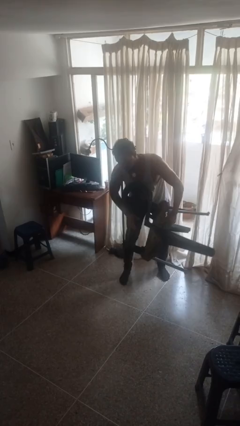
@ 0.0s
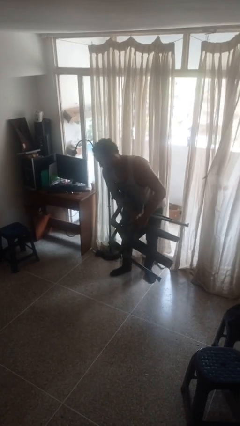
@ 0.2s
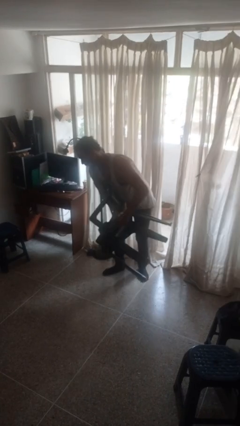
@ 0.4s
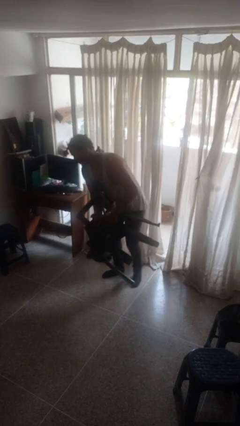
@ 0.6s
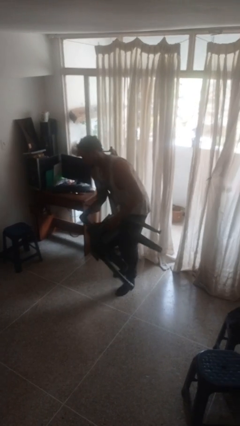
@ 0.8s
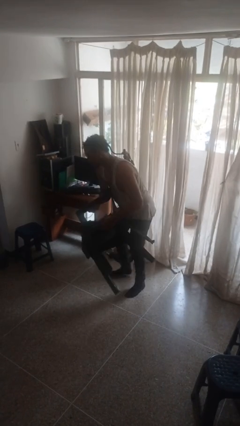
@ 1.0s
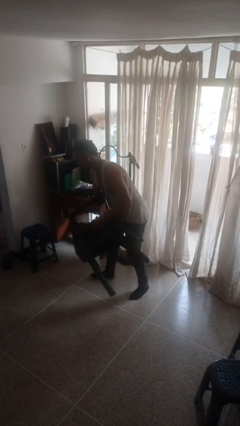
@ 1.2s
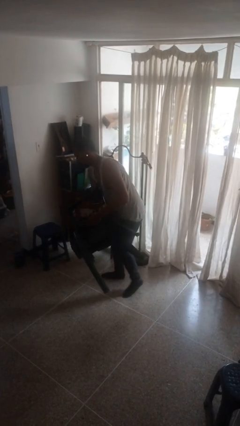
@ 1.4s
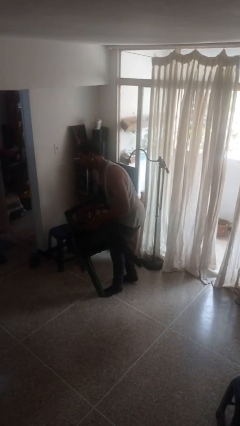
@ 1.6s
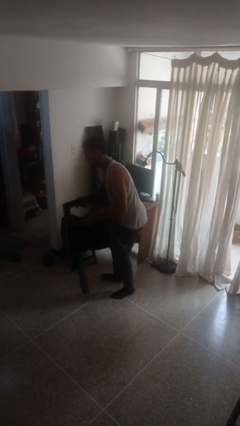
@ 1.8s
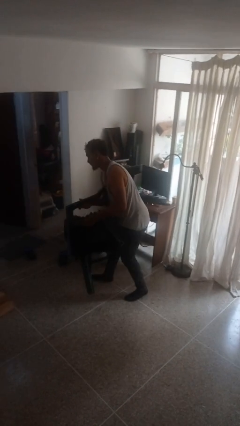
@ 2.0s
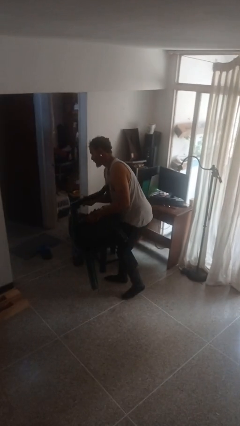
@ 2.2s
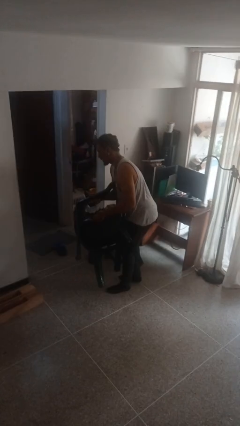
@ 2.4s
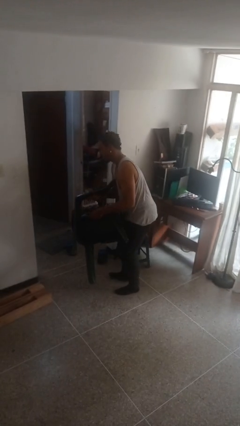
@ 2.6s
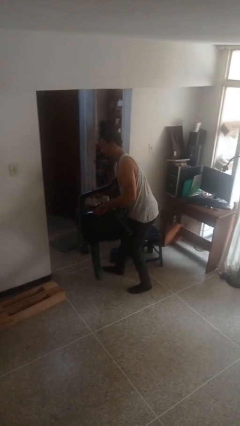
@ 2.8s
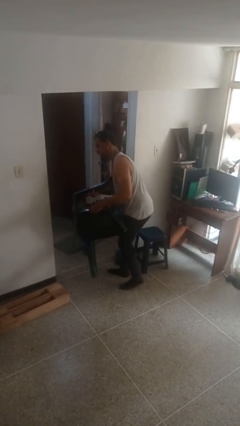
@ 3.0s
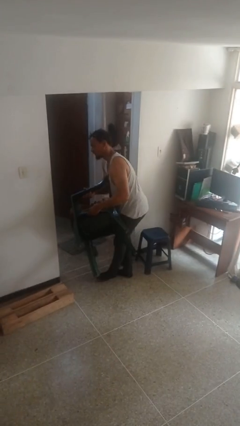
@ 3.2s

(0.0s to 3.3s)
person carries furniture

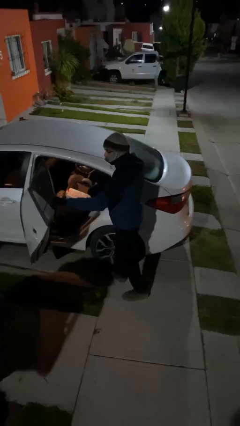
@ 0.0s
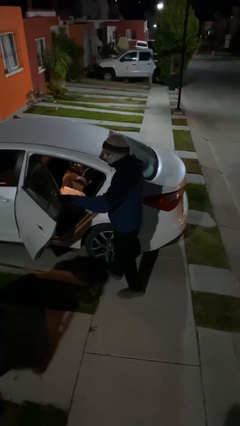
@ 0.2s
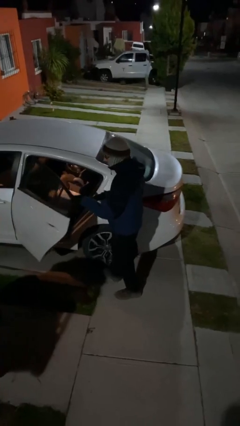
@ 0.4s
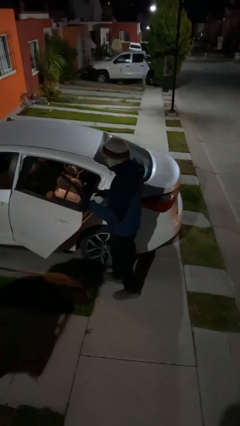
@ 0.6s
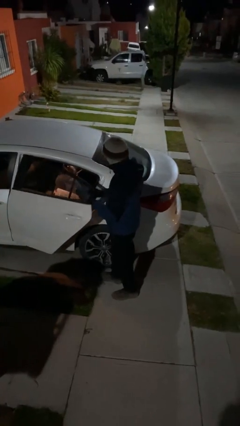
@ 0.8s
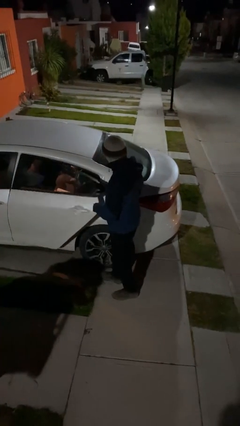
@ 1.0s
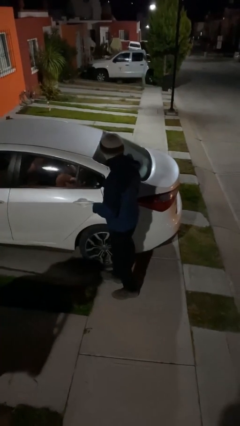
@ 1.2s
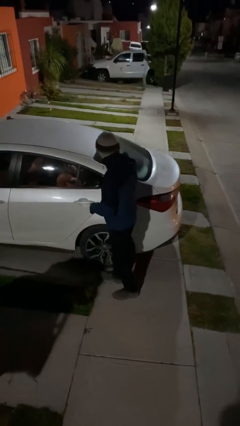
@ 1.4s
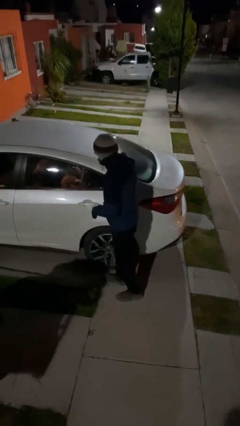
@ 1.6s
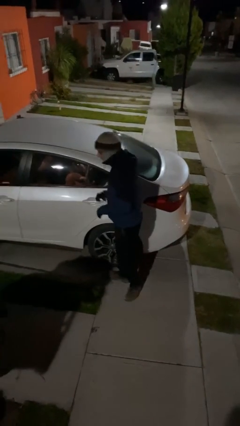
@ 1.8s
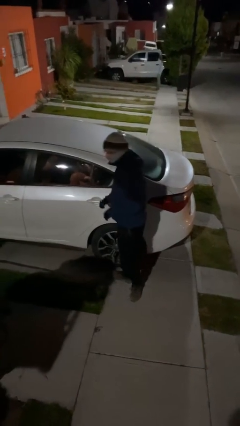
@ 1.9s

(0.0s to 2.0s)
person closes car door

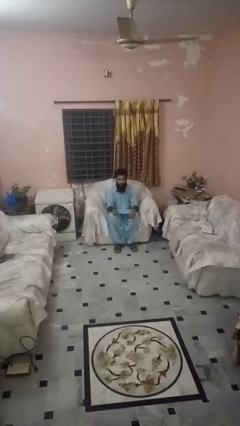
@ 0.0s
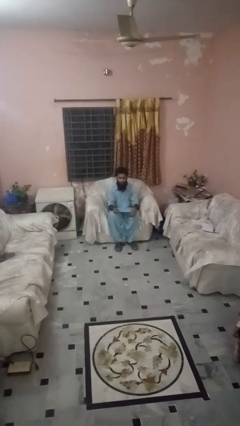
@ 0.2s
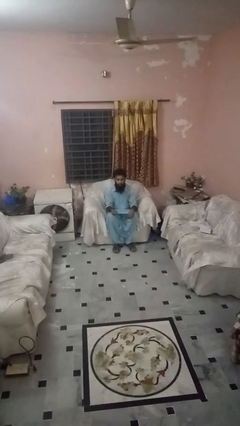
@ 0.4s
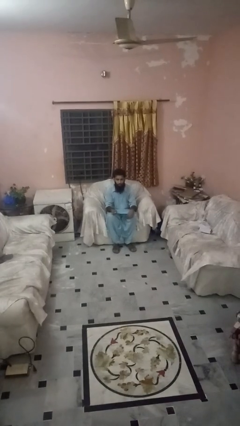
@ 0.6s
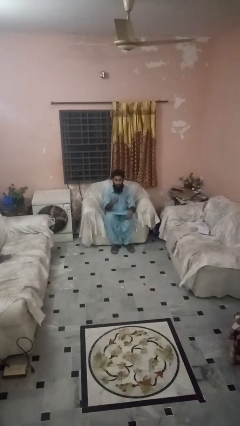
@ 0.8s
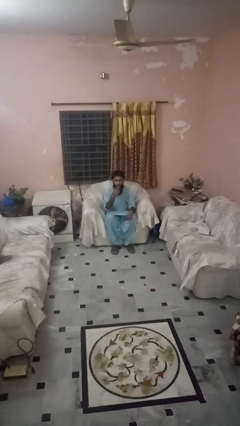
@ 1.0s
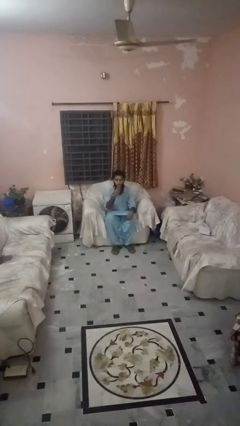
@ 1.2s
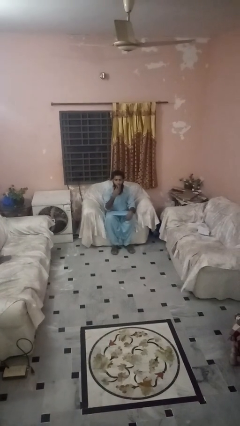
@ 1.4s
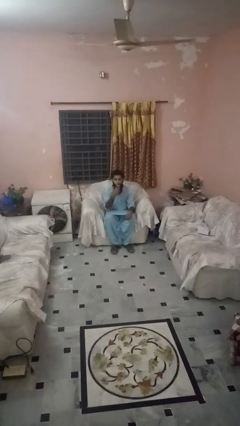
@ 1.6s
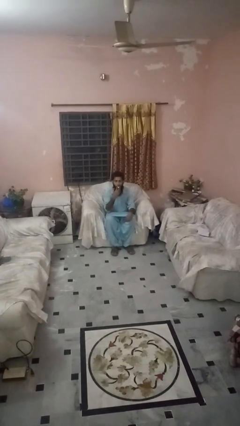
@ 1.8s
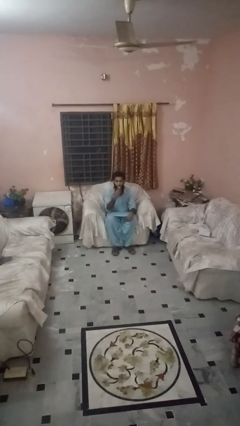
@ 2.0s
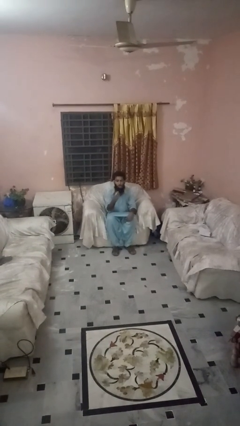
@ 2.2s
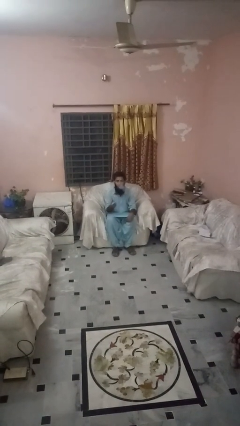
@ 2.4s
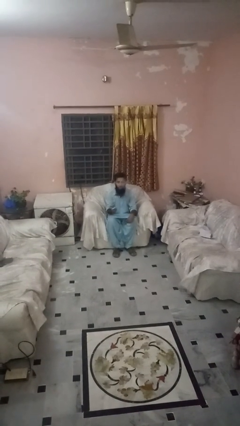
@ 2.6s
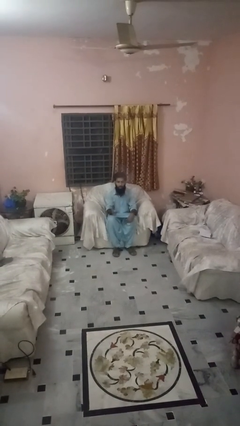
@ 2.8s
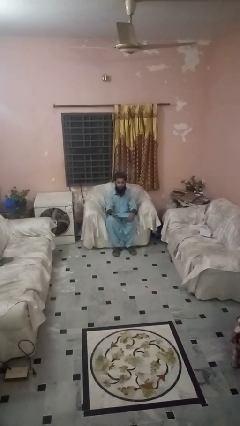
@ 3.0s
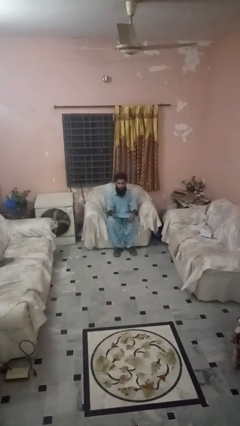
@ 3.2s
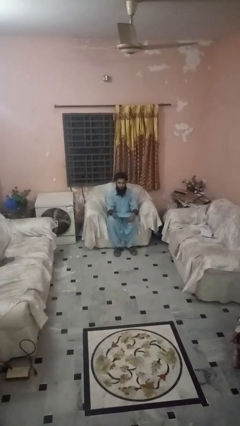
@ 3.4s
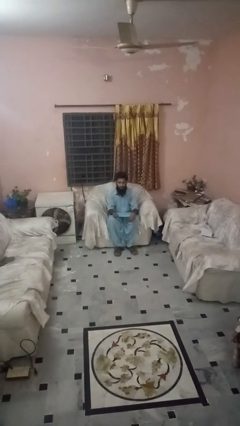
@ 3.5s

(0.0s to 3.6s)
person vapes

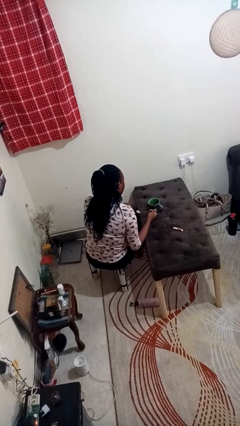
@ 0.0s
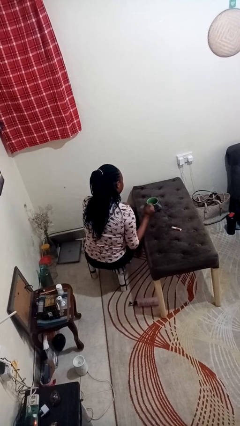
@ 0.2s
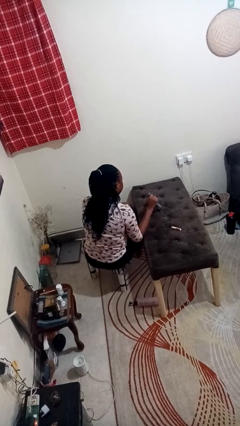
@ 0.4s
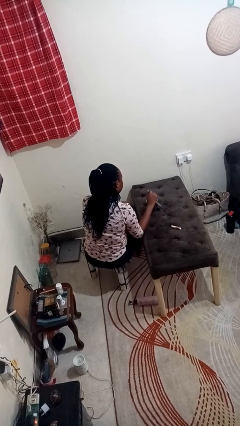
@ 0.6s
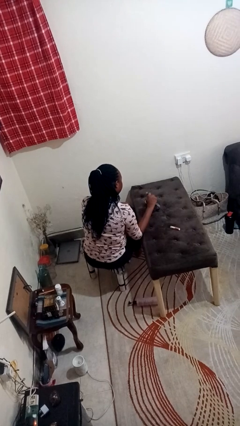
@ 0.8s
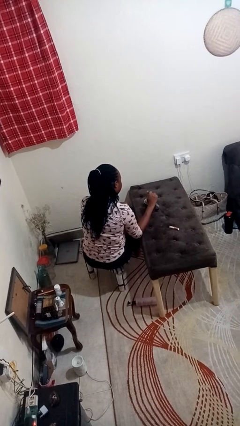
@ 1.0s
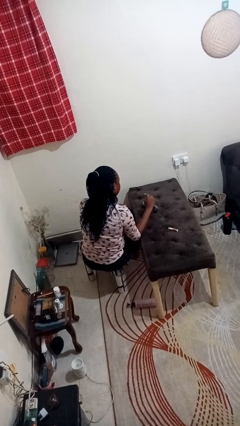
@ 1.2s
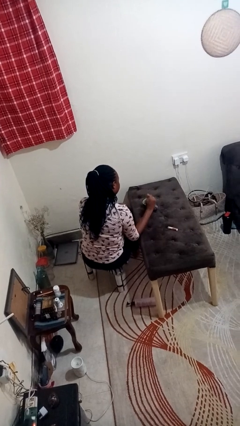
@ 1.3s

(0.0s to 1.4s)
person stirs mug

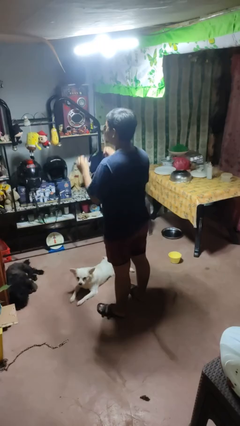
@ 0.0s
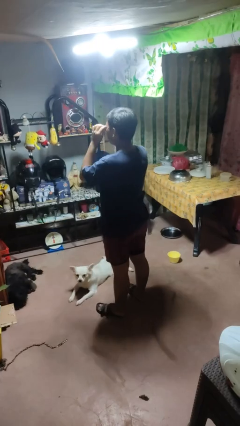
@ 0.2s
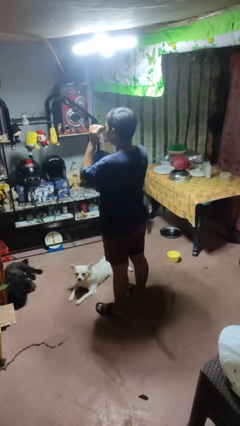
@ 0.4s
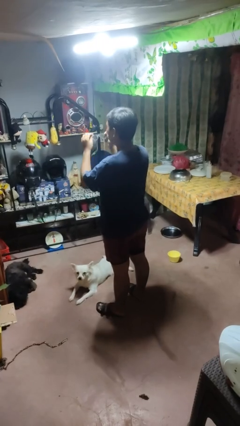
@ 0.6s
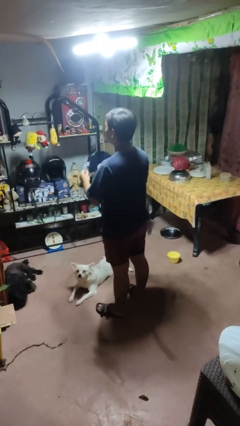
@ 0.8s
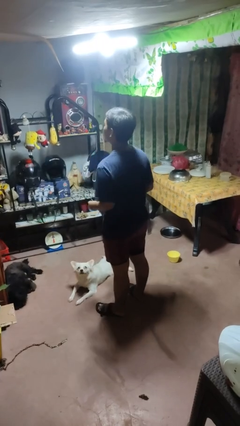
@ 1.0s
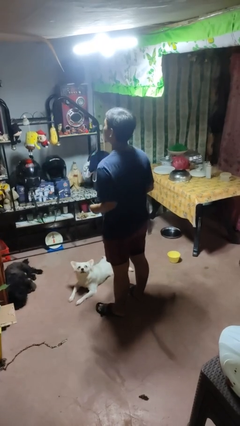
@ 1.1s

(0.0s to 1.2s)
person takes off sunglasses

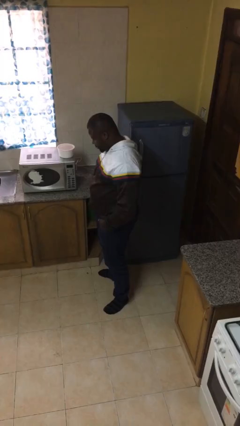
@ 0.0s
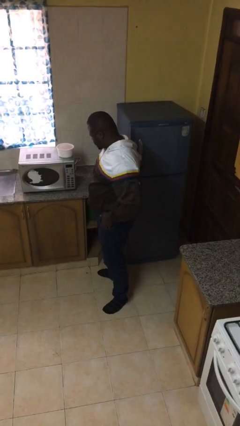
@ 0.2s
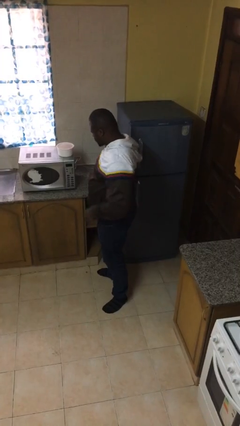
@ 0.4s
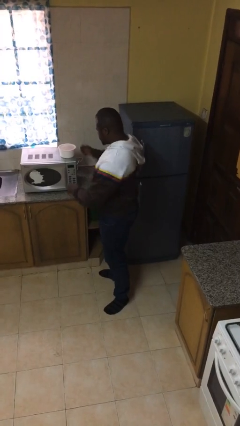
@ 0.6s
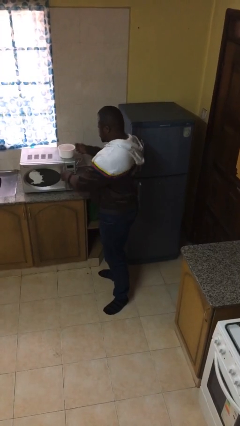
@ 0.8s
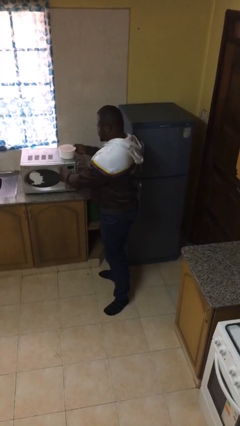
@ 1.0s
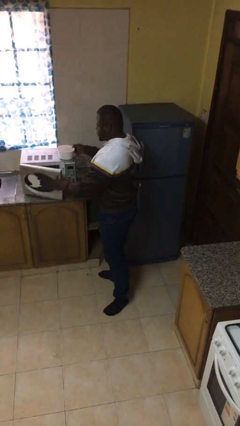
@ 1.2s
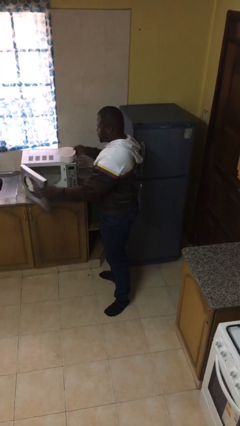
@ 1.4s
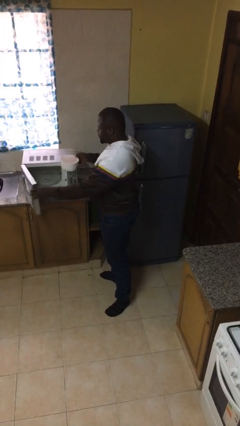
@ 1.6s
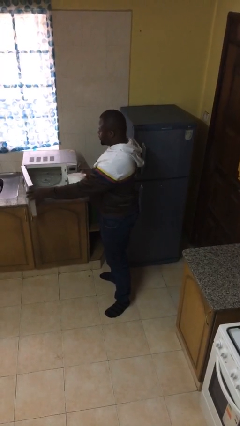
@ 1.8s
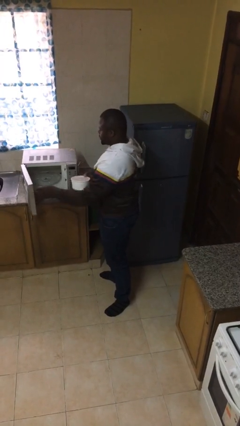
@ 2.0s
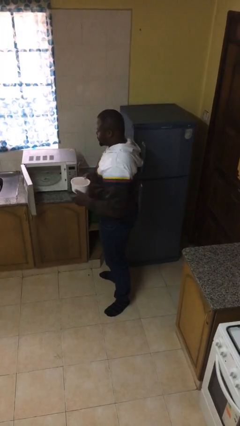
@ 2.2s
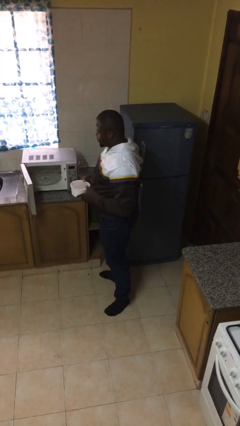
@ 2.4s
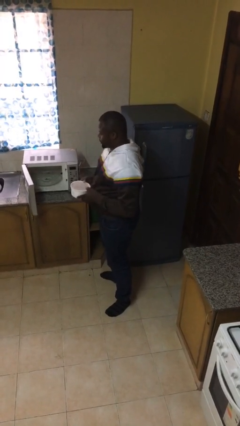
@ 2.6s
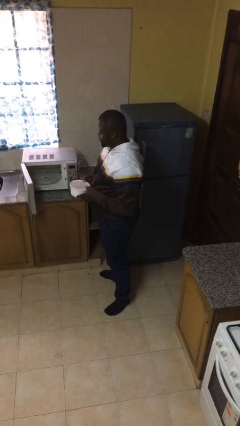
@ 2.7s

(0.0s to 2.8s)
person opens microwave

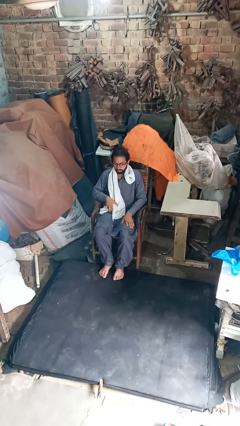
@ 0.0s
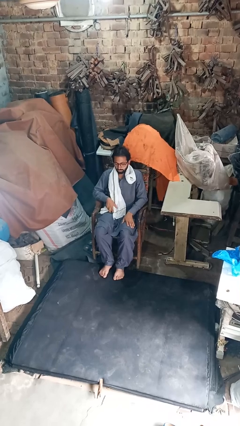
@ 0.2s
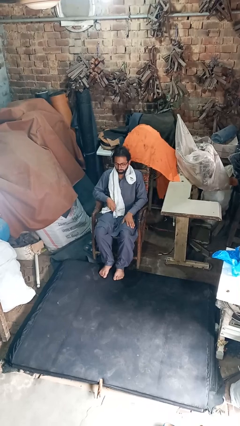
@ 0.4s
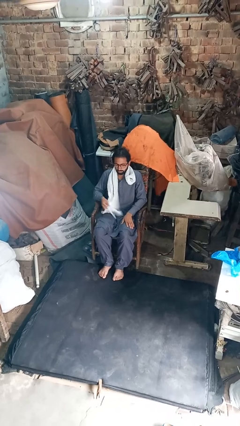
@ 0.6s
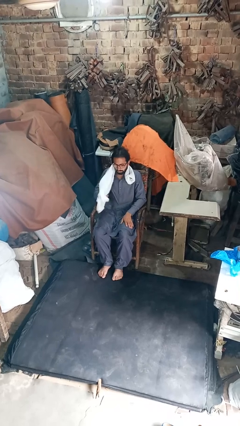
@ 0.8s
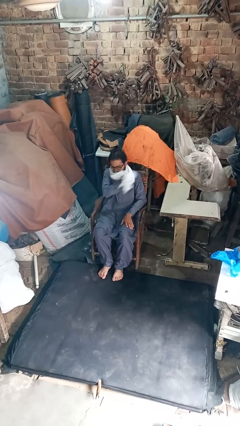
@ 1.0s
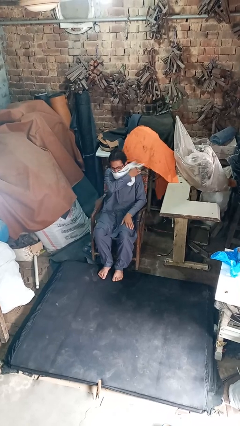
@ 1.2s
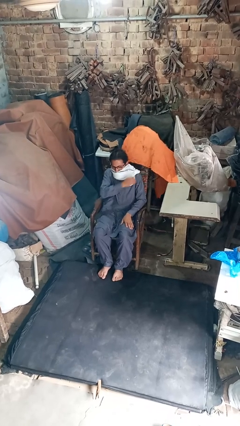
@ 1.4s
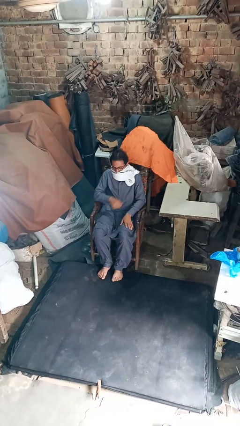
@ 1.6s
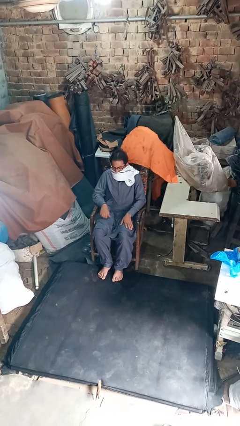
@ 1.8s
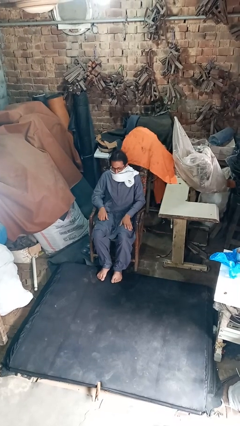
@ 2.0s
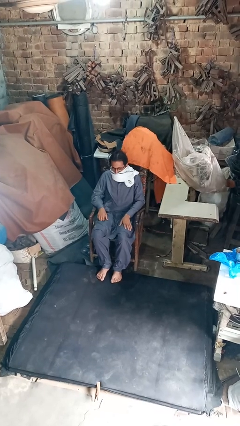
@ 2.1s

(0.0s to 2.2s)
person puts on scarf

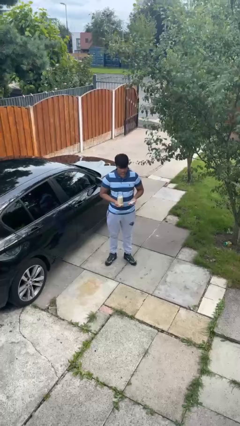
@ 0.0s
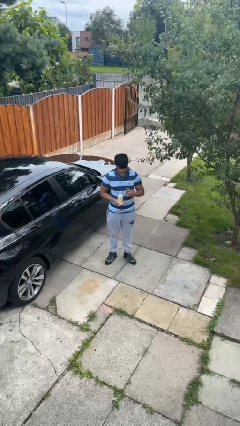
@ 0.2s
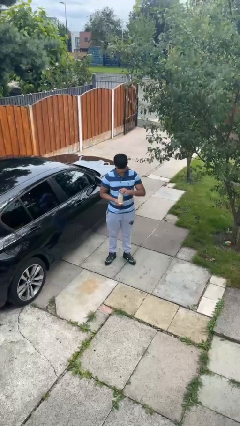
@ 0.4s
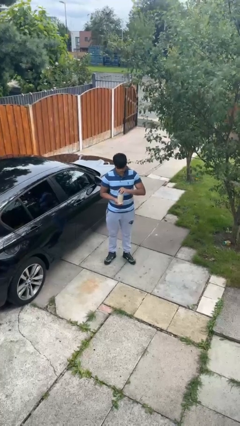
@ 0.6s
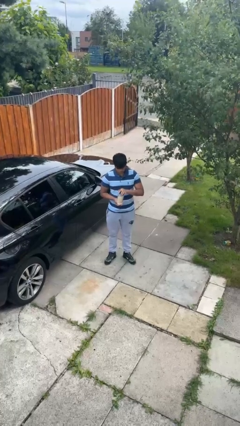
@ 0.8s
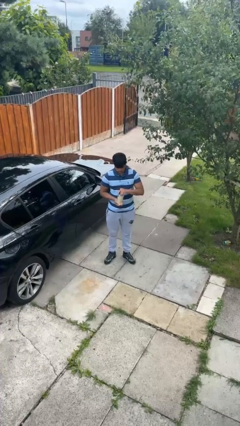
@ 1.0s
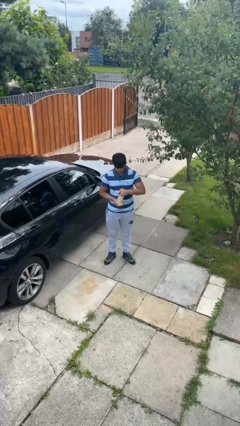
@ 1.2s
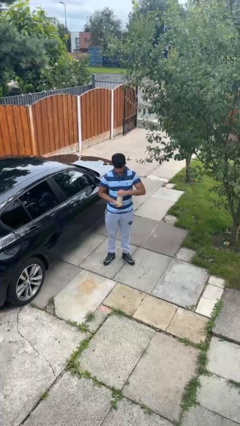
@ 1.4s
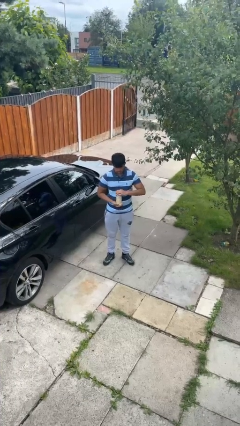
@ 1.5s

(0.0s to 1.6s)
person closes jar
